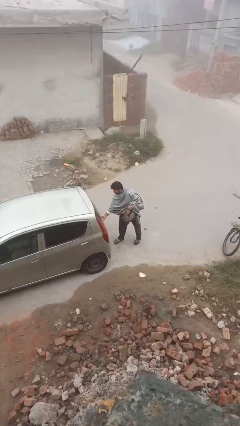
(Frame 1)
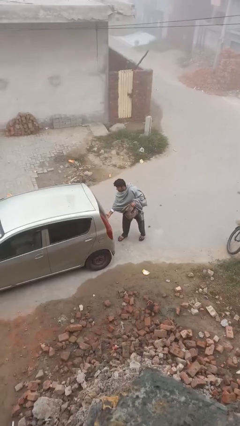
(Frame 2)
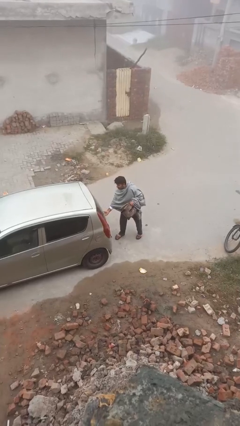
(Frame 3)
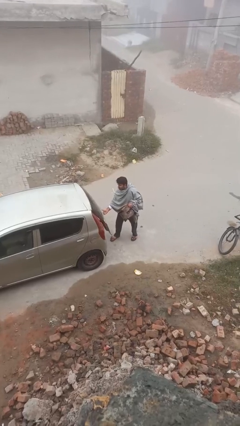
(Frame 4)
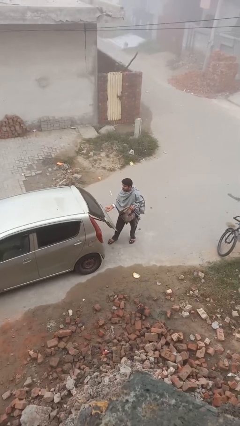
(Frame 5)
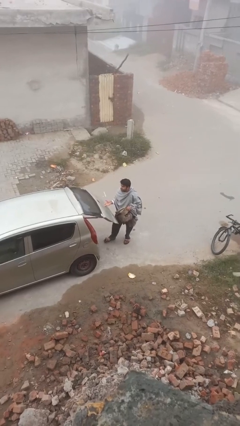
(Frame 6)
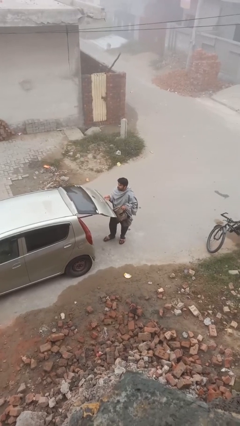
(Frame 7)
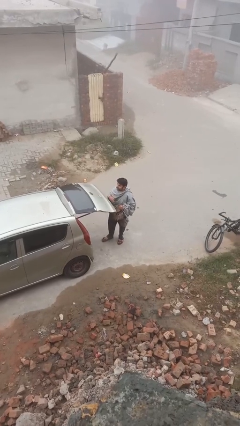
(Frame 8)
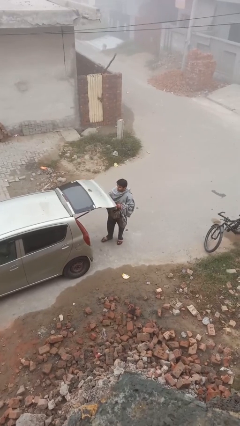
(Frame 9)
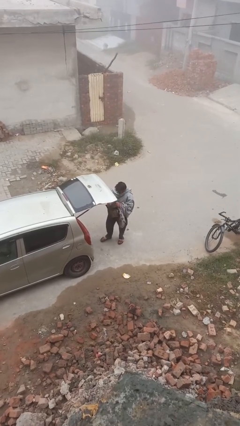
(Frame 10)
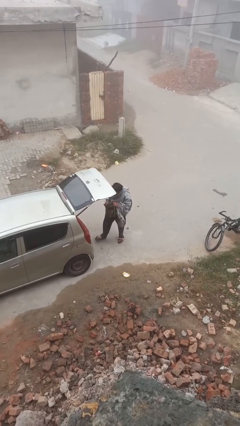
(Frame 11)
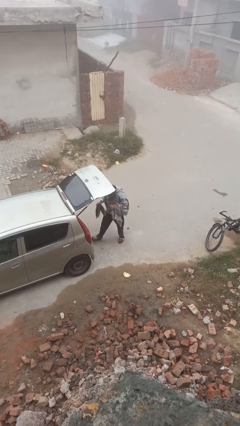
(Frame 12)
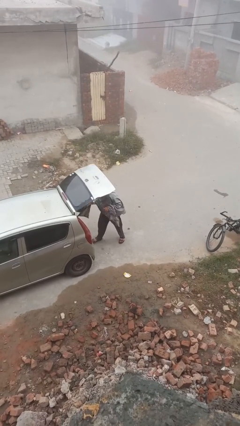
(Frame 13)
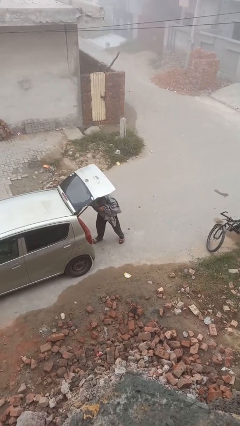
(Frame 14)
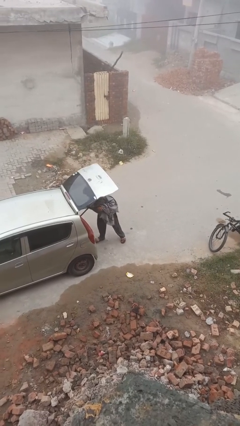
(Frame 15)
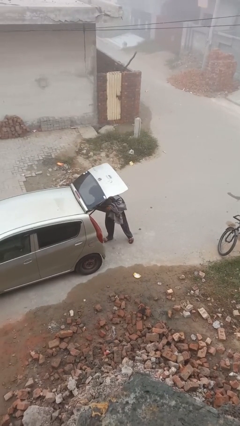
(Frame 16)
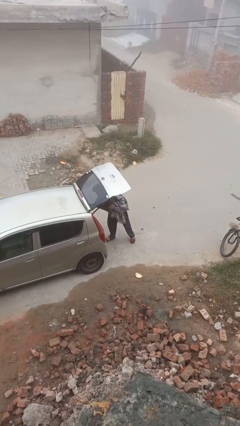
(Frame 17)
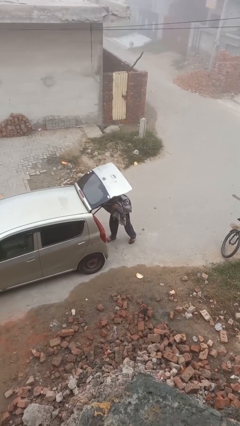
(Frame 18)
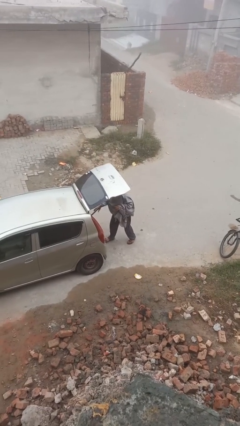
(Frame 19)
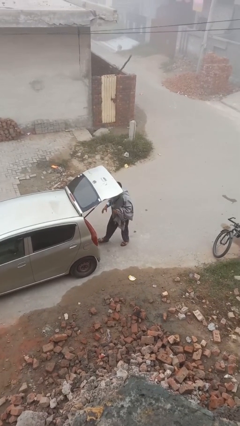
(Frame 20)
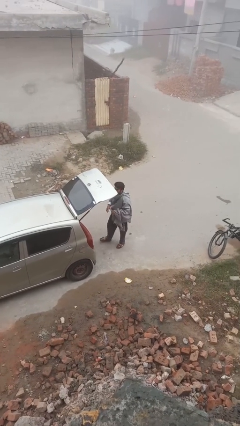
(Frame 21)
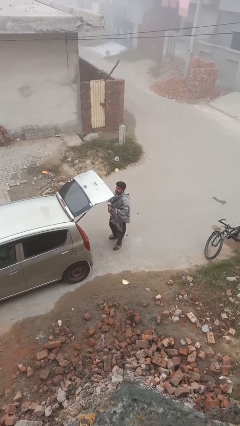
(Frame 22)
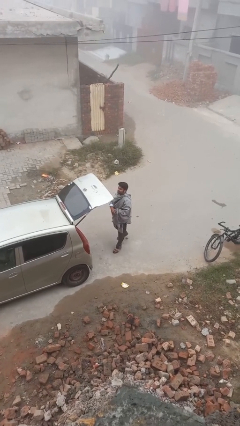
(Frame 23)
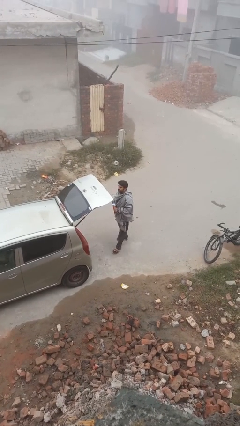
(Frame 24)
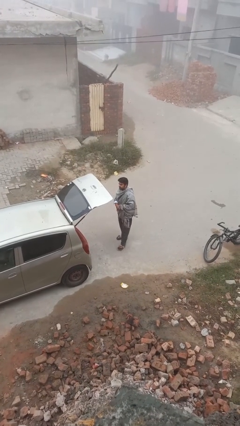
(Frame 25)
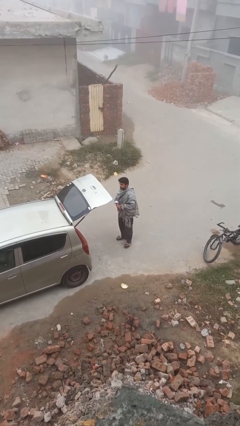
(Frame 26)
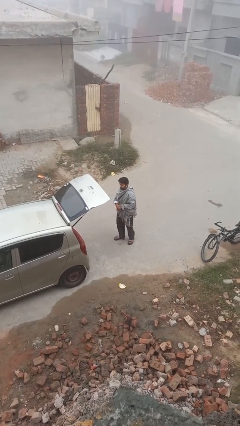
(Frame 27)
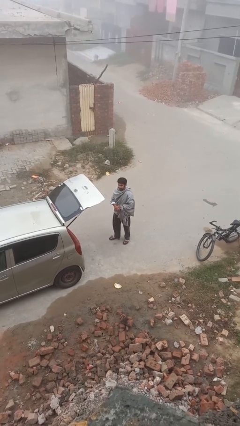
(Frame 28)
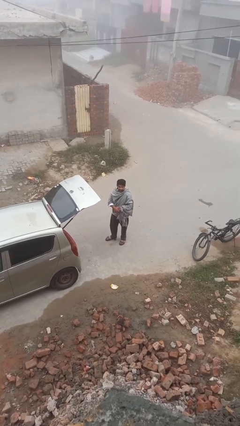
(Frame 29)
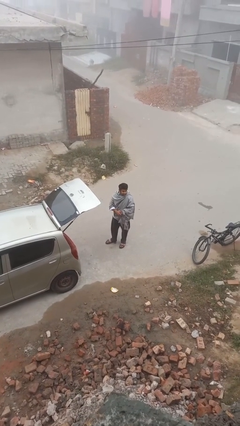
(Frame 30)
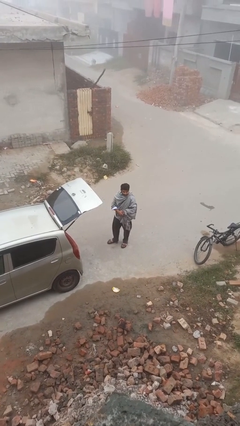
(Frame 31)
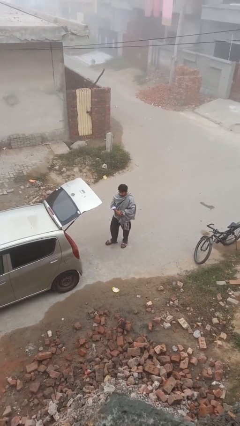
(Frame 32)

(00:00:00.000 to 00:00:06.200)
person loads car

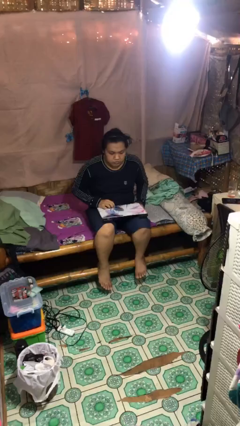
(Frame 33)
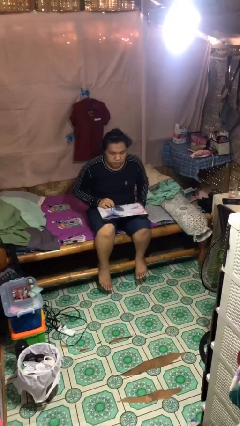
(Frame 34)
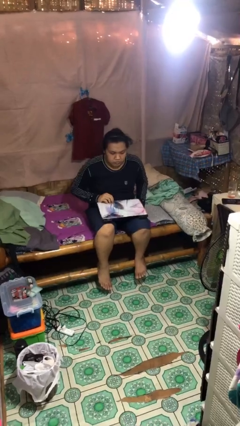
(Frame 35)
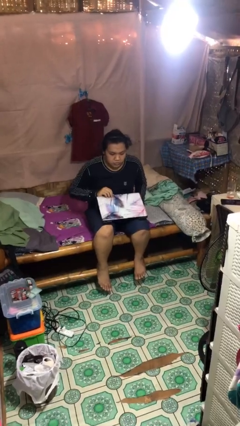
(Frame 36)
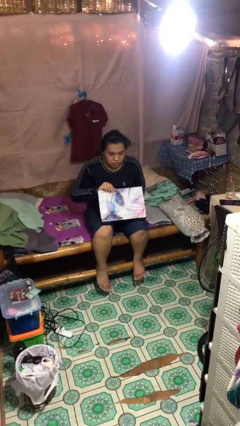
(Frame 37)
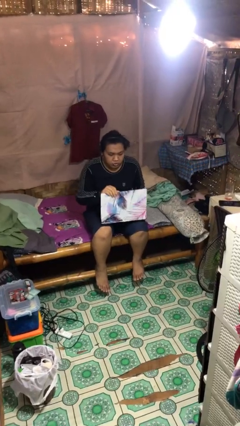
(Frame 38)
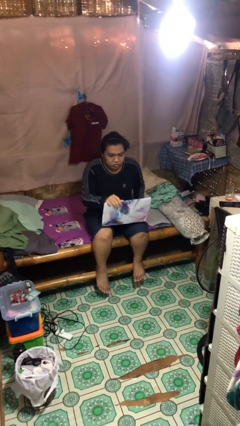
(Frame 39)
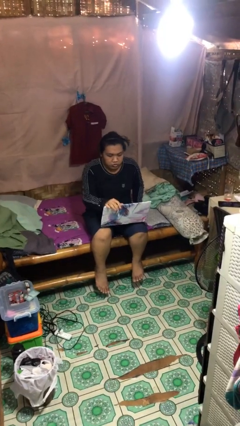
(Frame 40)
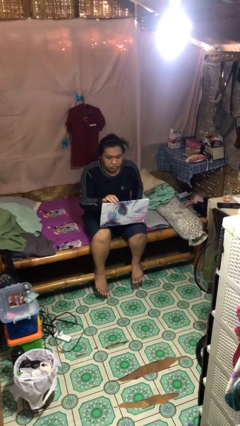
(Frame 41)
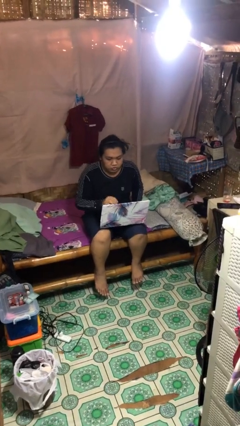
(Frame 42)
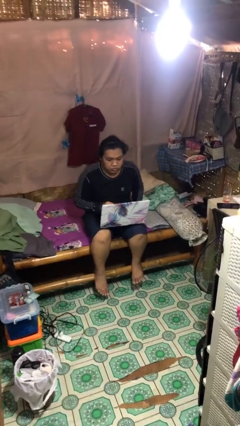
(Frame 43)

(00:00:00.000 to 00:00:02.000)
person opens laptop

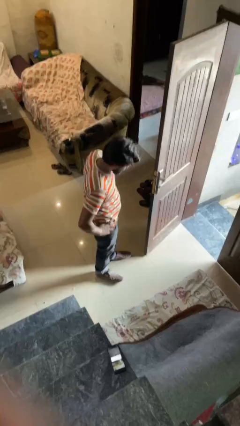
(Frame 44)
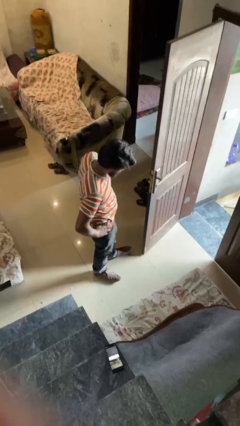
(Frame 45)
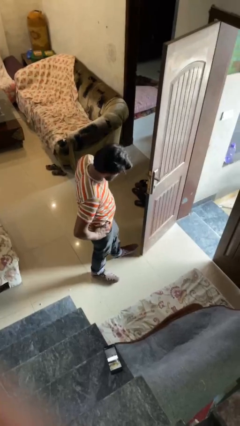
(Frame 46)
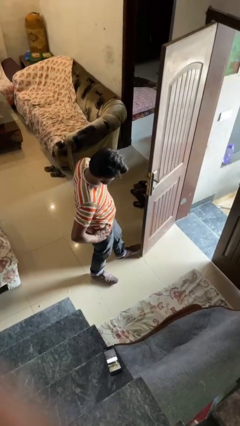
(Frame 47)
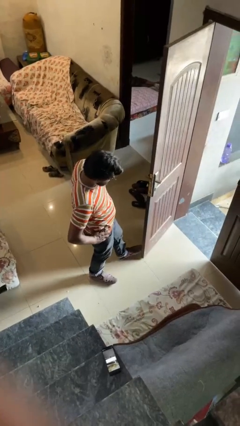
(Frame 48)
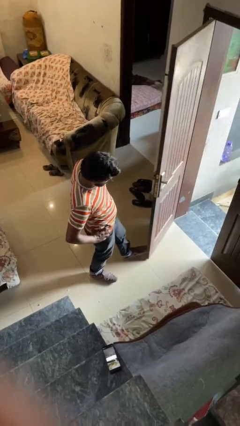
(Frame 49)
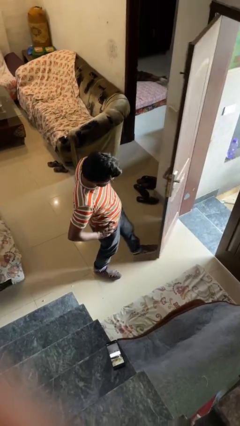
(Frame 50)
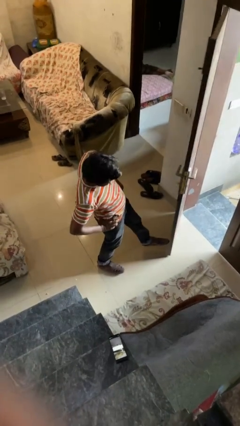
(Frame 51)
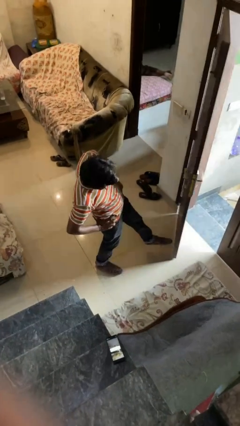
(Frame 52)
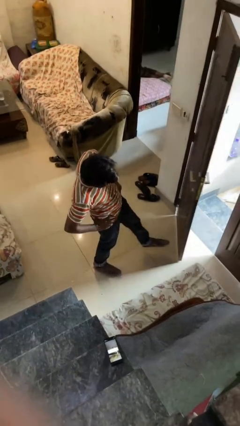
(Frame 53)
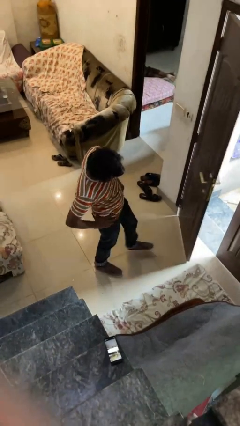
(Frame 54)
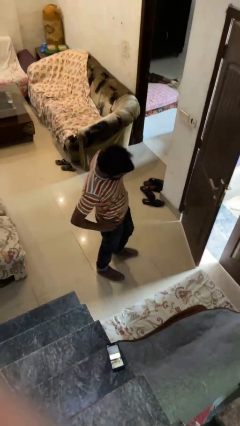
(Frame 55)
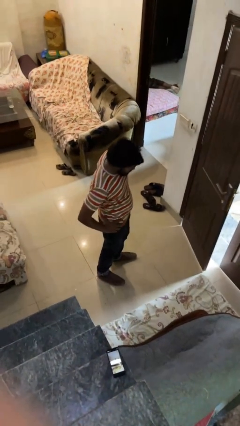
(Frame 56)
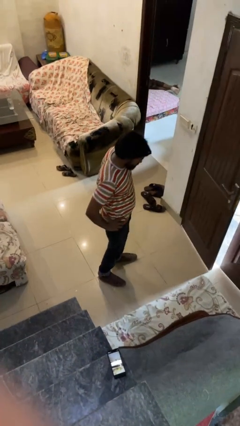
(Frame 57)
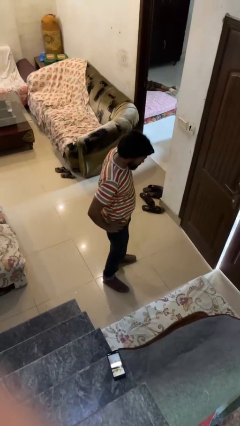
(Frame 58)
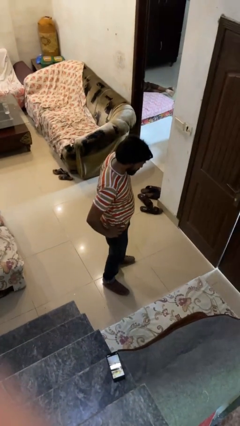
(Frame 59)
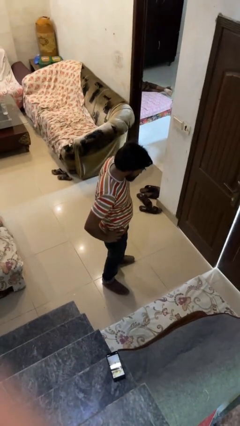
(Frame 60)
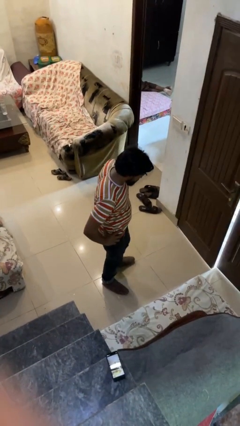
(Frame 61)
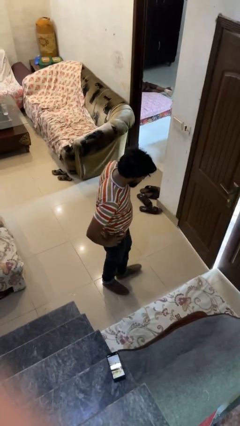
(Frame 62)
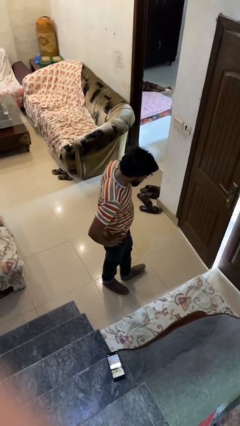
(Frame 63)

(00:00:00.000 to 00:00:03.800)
person closes door with foot

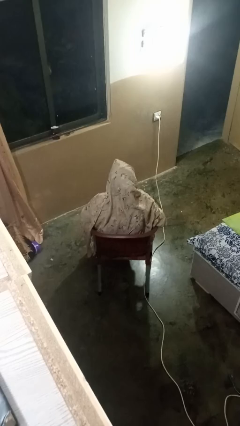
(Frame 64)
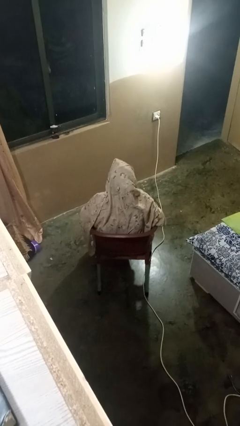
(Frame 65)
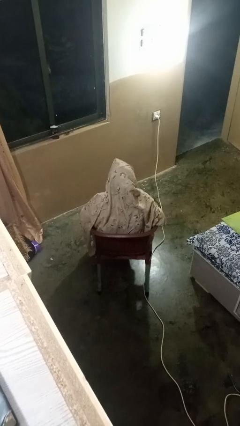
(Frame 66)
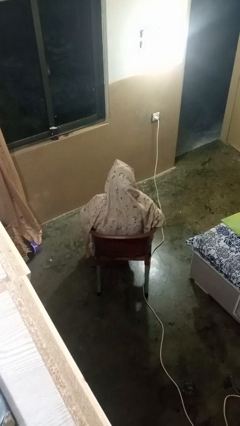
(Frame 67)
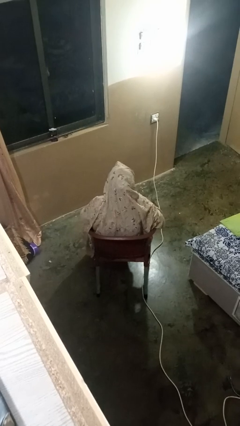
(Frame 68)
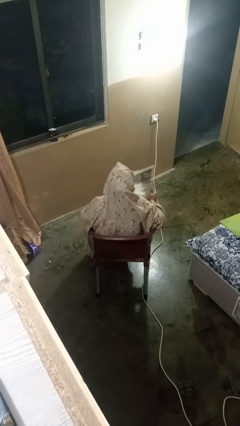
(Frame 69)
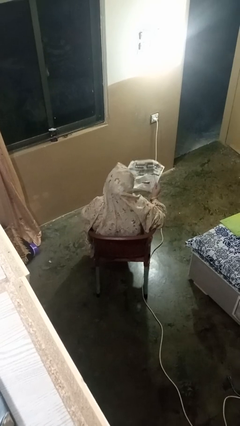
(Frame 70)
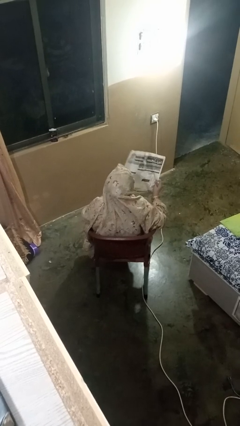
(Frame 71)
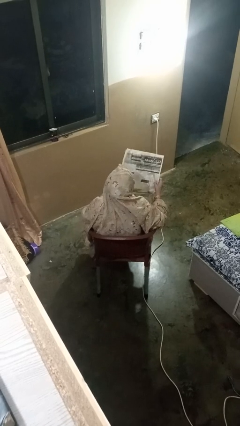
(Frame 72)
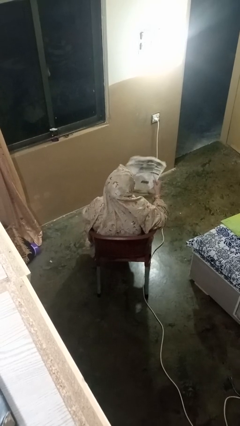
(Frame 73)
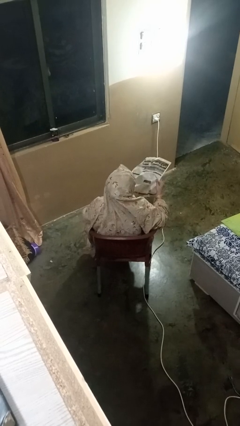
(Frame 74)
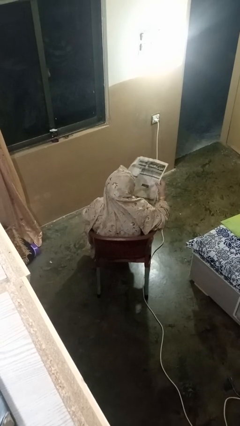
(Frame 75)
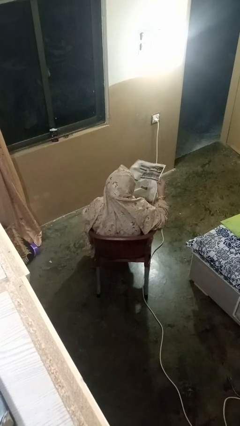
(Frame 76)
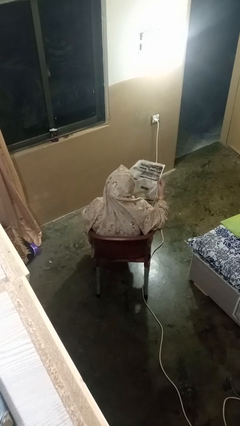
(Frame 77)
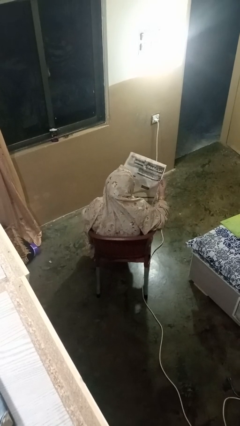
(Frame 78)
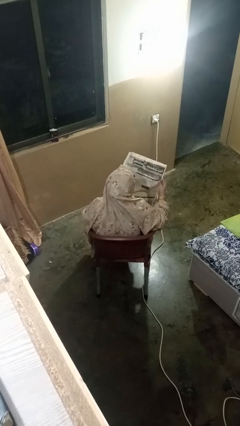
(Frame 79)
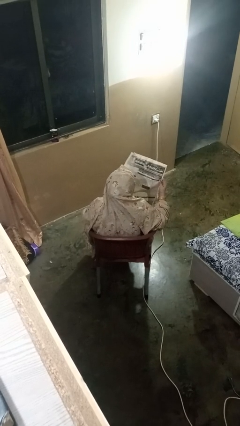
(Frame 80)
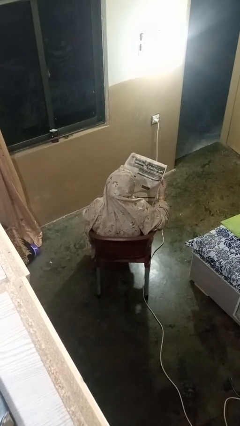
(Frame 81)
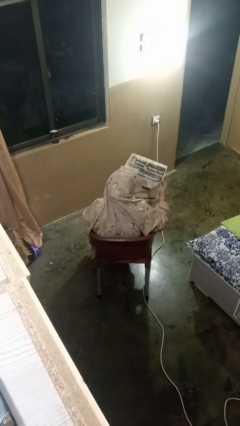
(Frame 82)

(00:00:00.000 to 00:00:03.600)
person reads newspaper

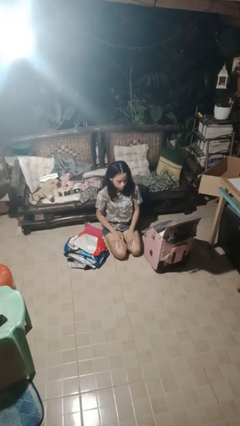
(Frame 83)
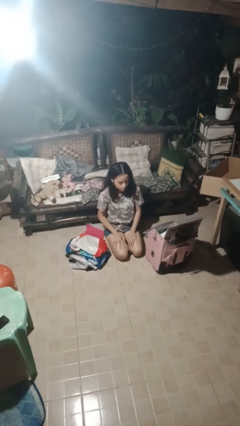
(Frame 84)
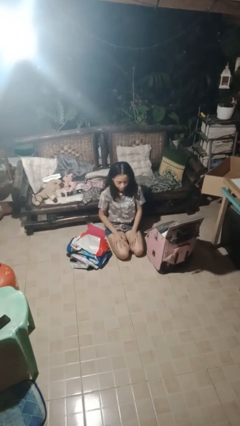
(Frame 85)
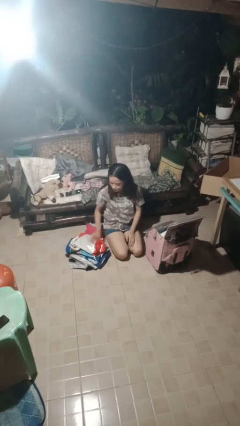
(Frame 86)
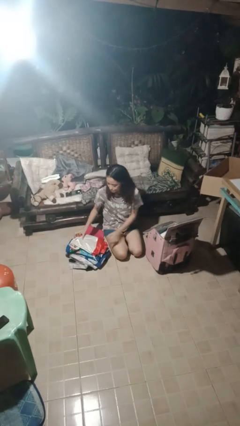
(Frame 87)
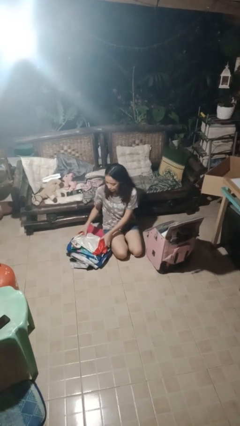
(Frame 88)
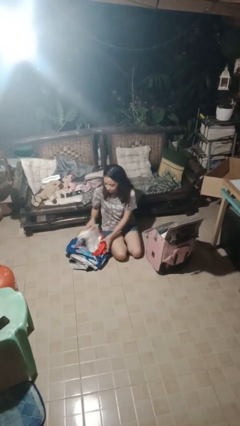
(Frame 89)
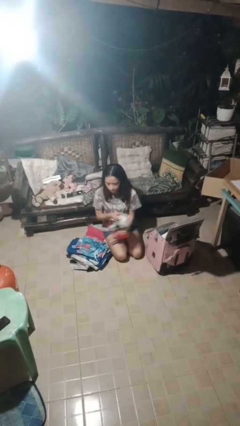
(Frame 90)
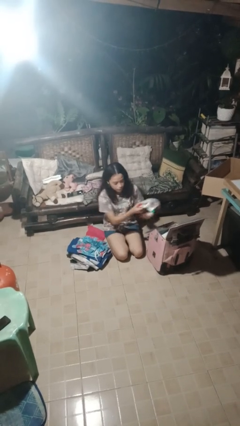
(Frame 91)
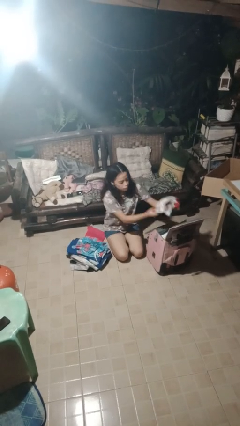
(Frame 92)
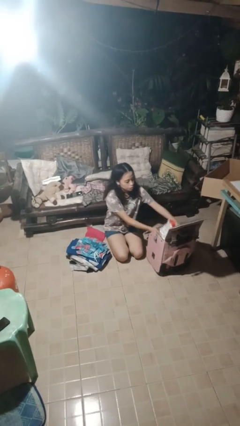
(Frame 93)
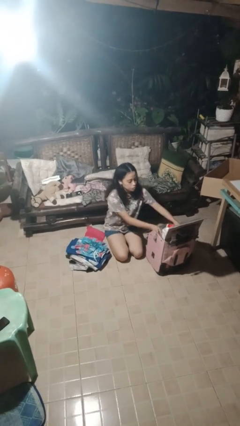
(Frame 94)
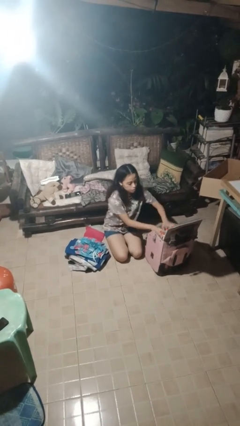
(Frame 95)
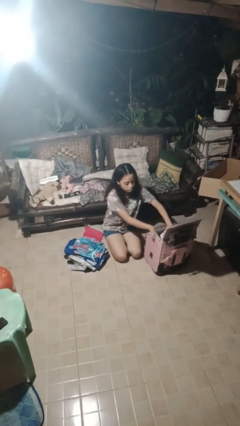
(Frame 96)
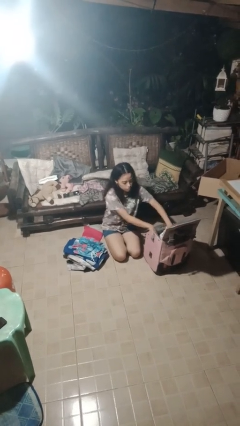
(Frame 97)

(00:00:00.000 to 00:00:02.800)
person loads clothes into suitcase
